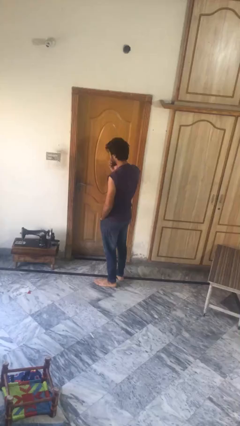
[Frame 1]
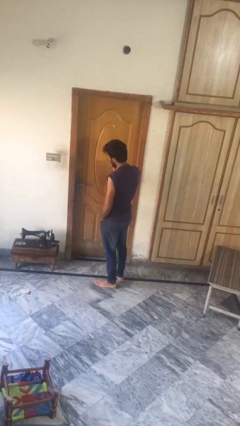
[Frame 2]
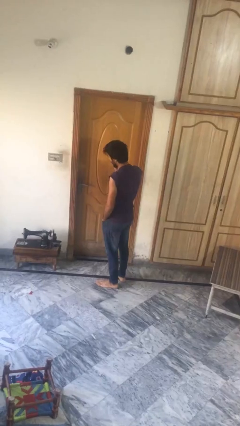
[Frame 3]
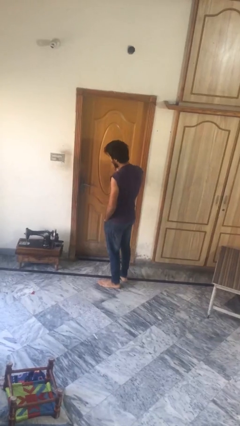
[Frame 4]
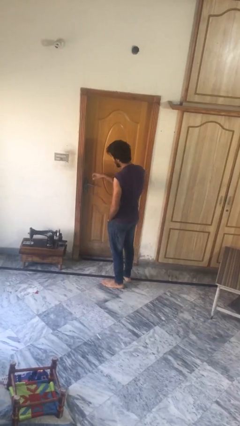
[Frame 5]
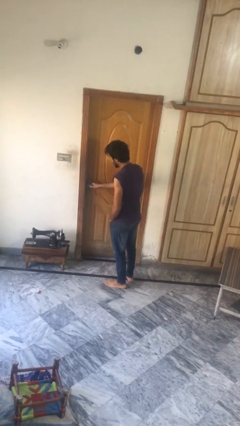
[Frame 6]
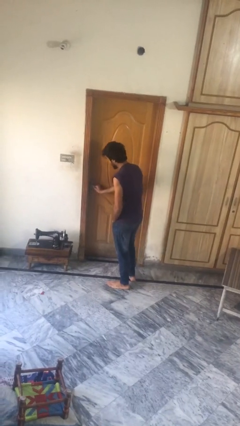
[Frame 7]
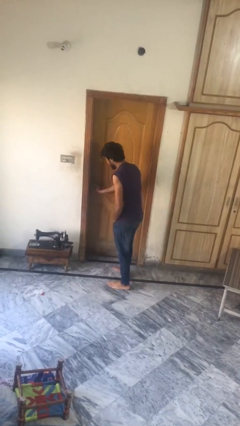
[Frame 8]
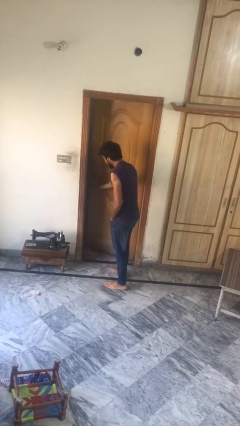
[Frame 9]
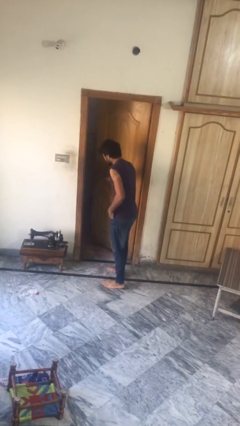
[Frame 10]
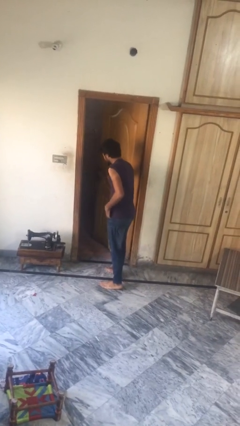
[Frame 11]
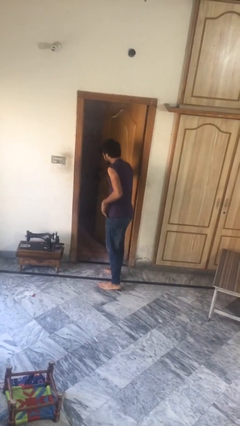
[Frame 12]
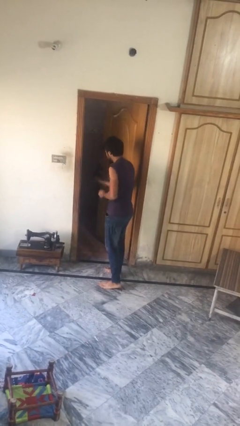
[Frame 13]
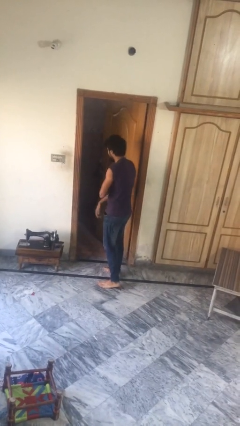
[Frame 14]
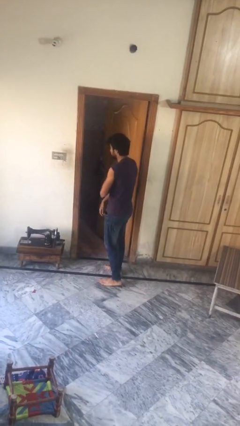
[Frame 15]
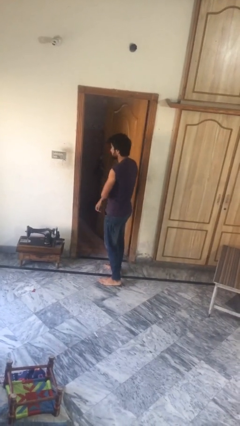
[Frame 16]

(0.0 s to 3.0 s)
person opens facility door

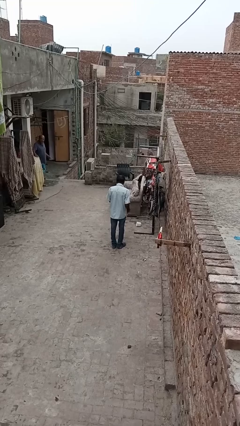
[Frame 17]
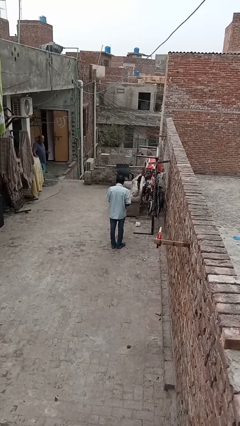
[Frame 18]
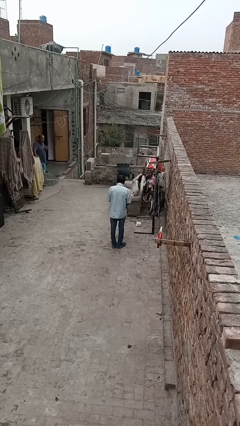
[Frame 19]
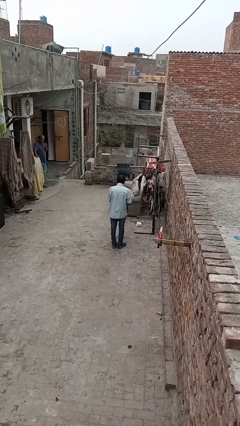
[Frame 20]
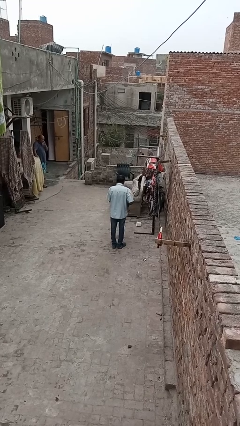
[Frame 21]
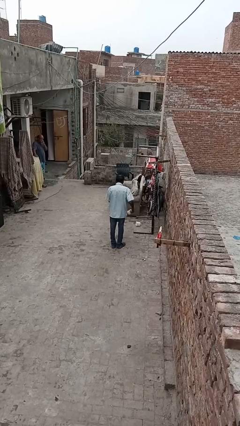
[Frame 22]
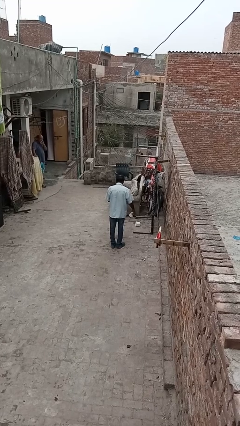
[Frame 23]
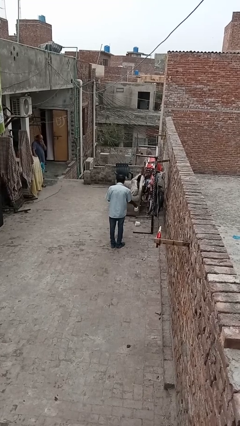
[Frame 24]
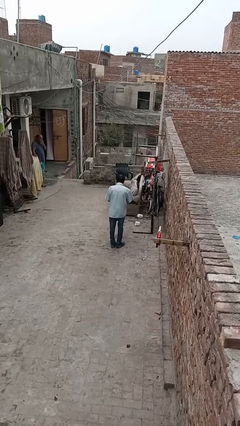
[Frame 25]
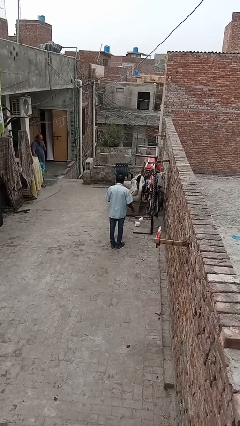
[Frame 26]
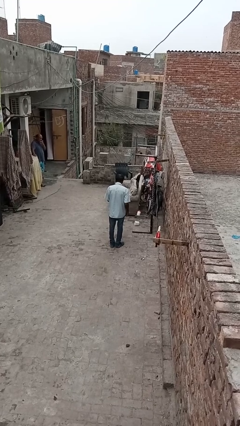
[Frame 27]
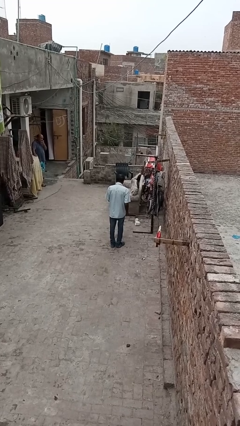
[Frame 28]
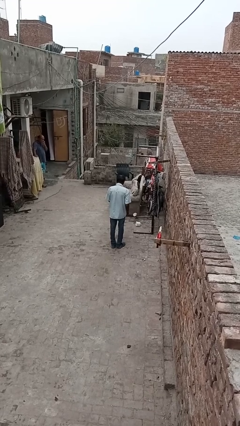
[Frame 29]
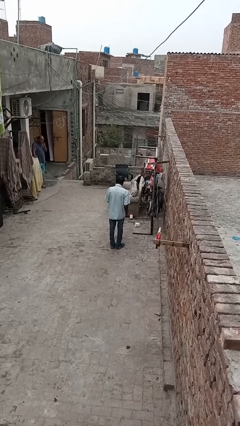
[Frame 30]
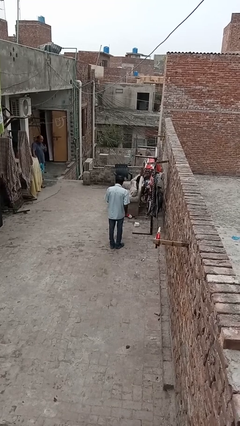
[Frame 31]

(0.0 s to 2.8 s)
person cleans table with rag

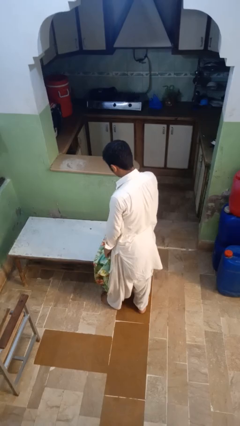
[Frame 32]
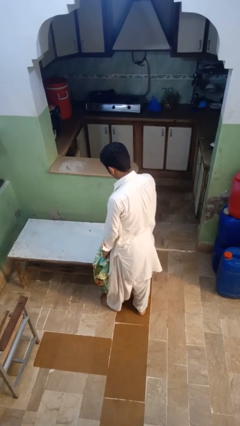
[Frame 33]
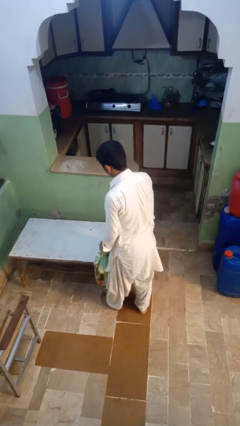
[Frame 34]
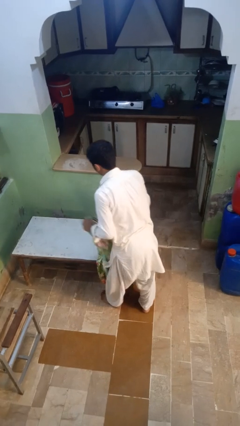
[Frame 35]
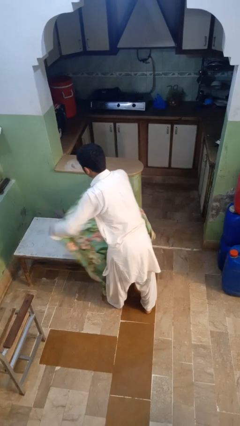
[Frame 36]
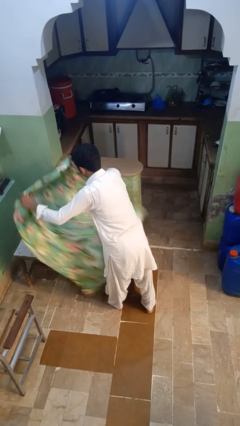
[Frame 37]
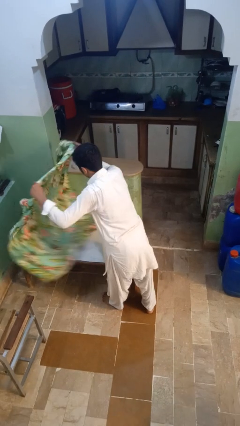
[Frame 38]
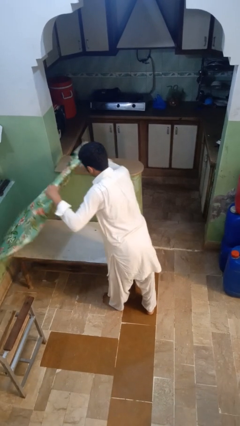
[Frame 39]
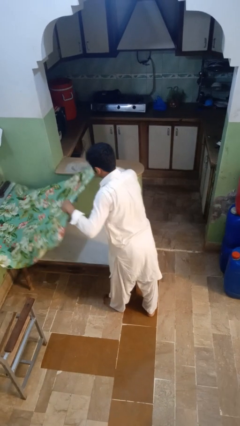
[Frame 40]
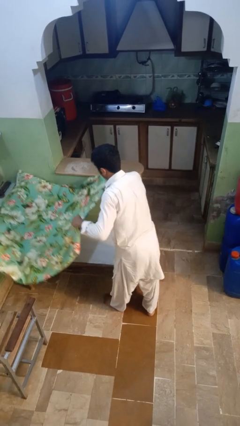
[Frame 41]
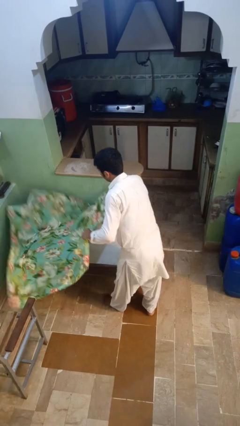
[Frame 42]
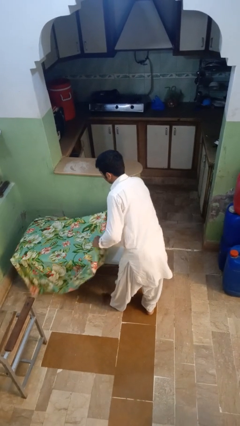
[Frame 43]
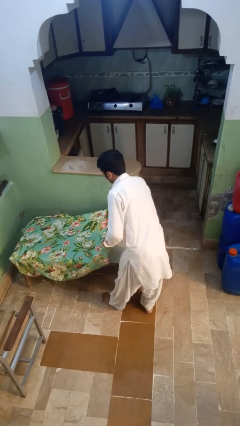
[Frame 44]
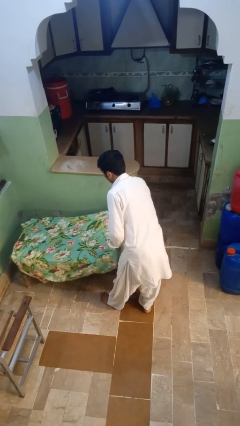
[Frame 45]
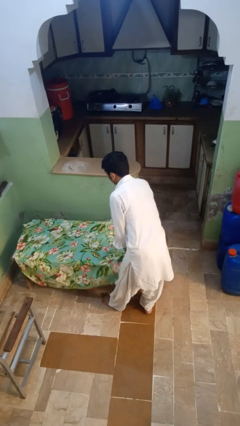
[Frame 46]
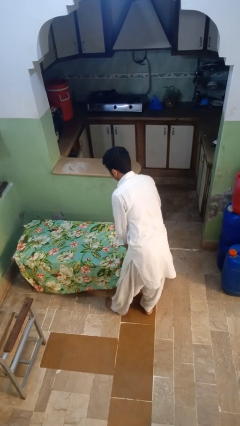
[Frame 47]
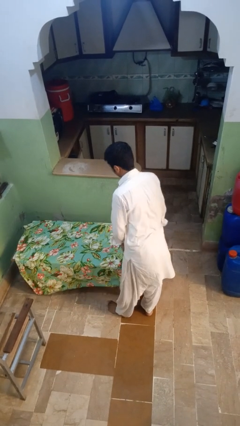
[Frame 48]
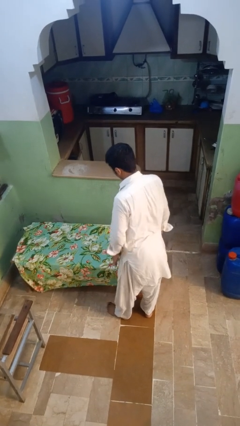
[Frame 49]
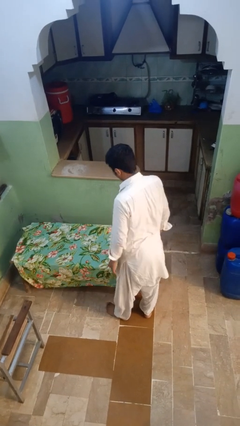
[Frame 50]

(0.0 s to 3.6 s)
person spreads tablecloth

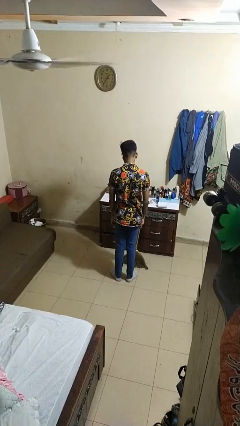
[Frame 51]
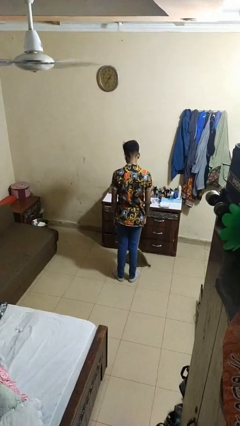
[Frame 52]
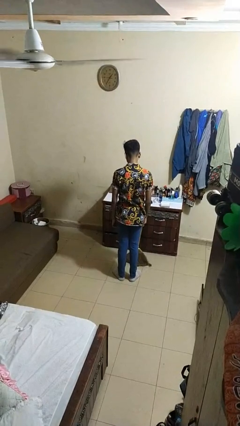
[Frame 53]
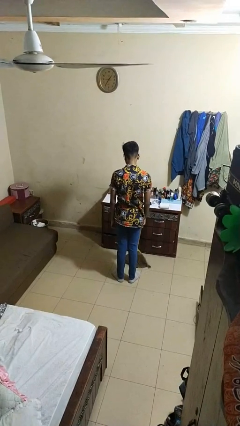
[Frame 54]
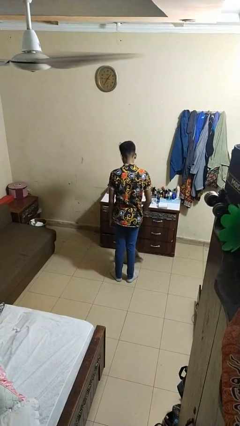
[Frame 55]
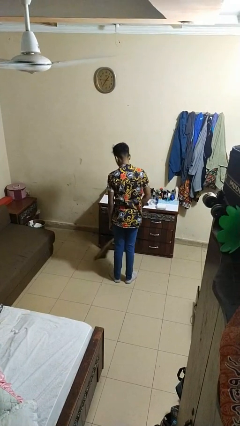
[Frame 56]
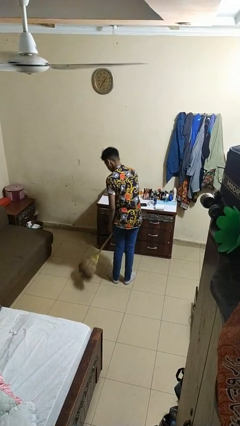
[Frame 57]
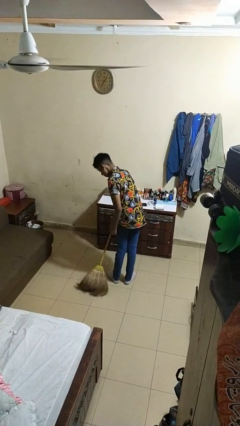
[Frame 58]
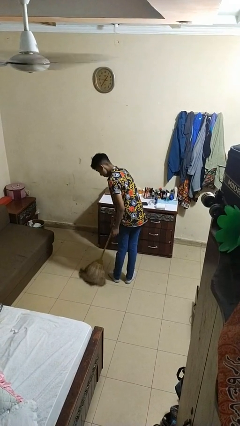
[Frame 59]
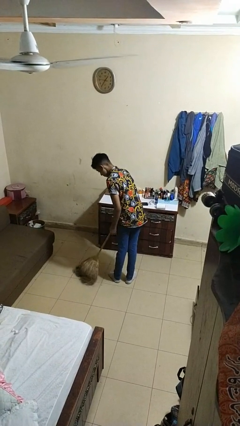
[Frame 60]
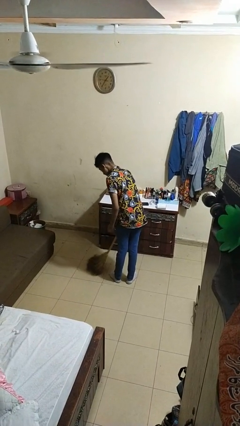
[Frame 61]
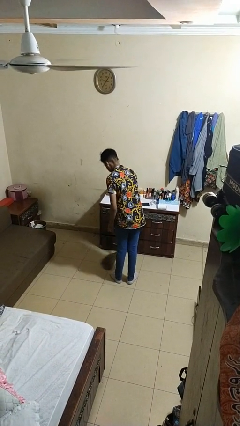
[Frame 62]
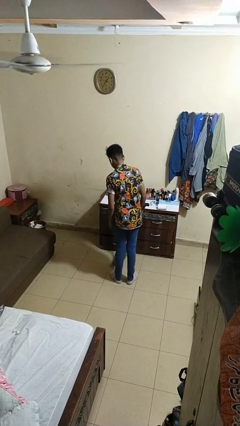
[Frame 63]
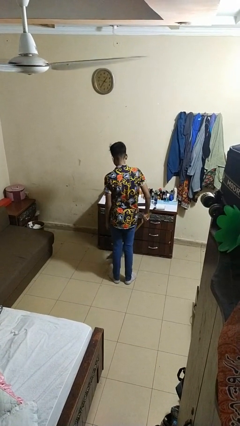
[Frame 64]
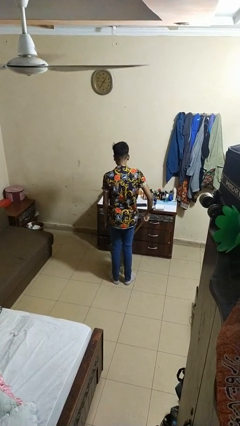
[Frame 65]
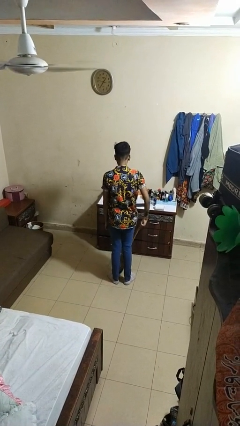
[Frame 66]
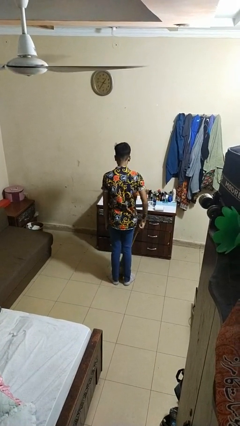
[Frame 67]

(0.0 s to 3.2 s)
person sweeps floor

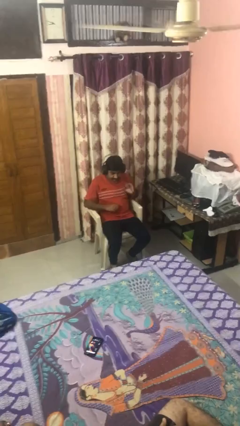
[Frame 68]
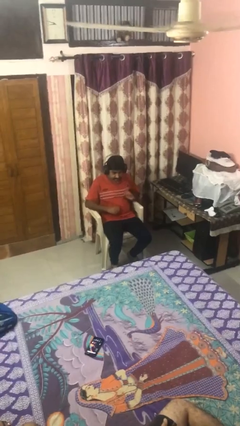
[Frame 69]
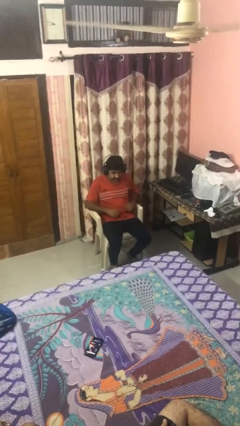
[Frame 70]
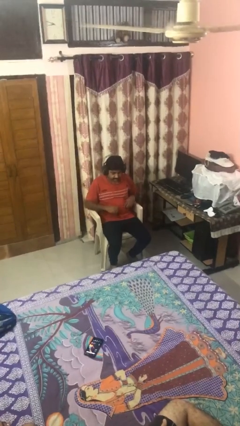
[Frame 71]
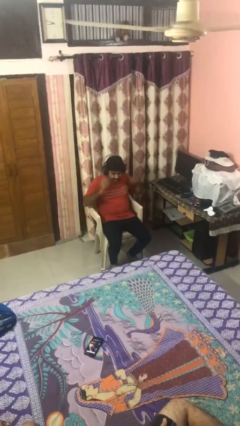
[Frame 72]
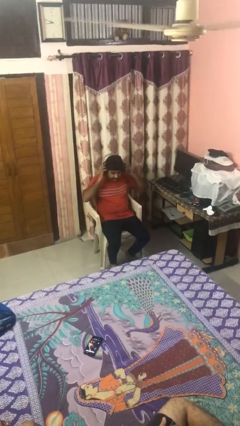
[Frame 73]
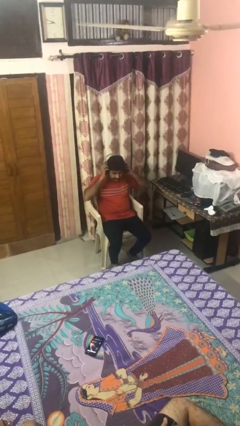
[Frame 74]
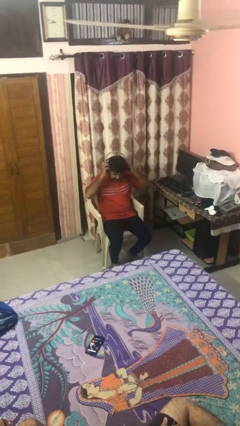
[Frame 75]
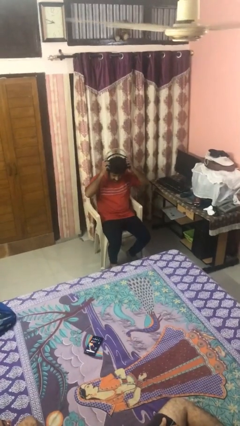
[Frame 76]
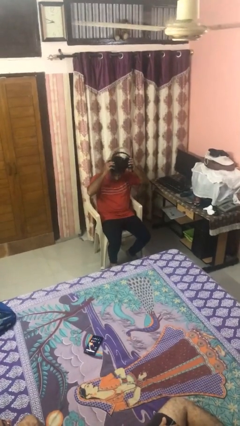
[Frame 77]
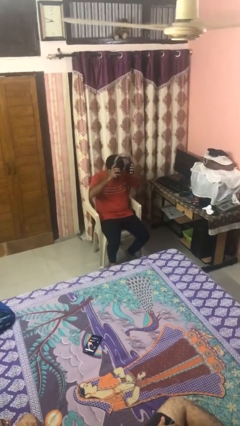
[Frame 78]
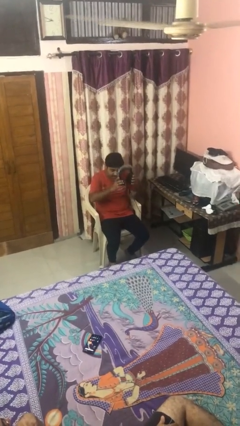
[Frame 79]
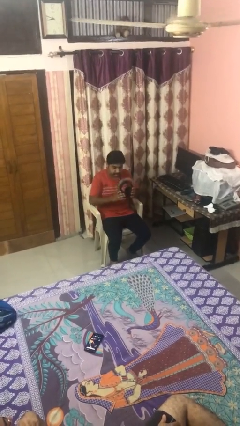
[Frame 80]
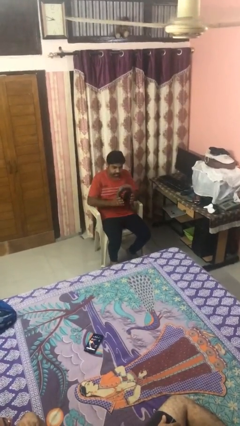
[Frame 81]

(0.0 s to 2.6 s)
person takes off headphones

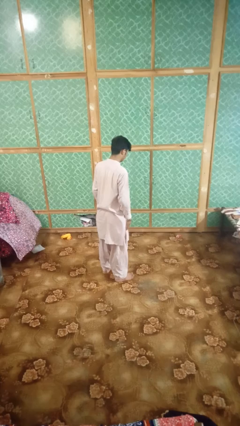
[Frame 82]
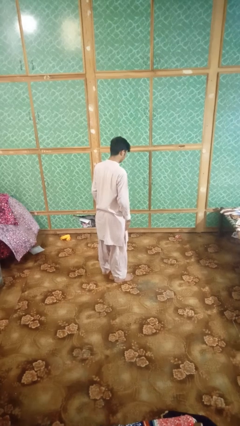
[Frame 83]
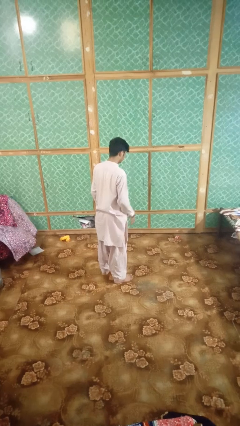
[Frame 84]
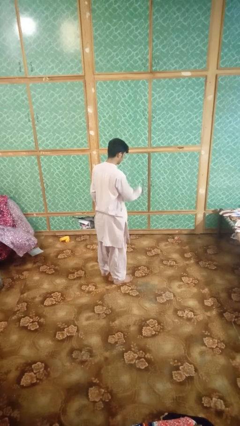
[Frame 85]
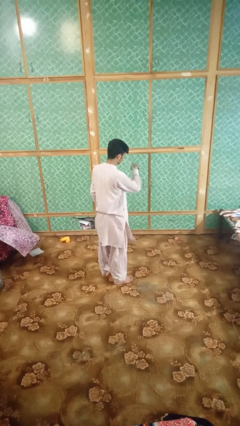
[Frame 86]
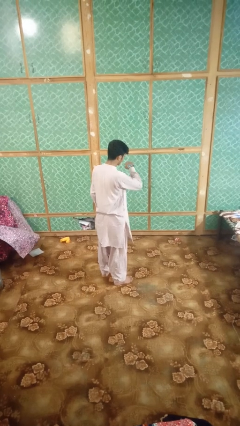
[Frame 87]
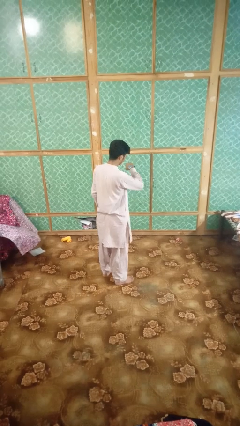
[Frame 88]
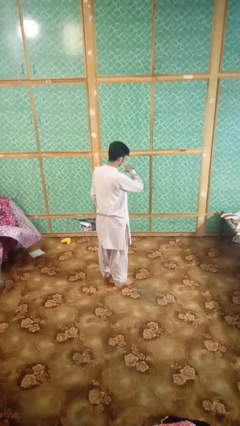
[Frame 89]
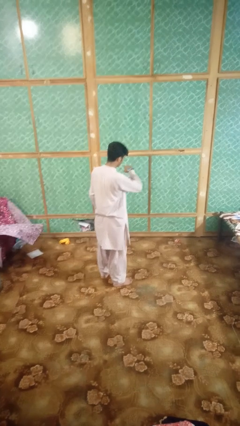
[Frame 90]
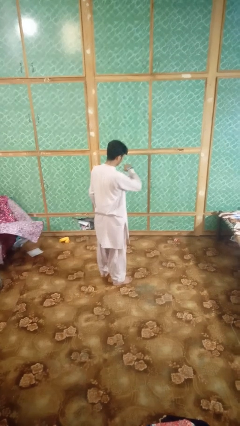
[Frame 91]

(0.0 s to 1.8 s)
person looks at wristwatch

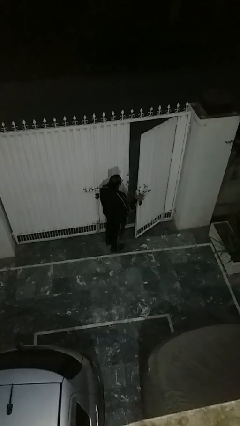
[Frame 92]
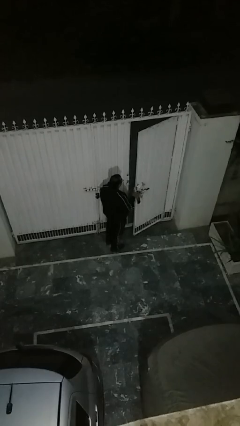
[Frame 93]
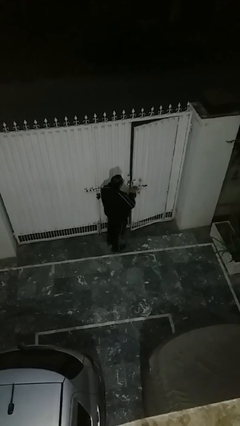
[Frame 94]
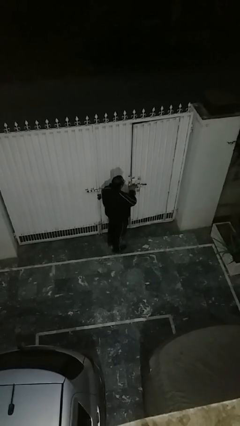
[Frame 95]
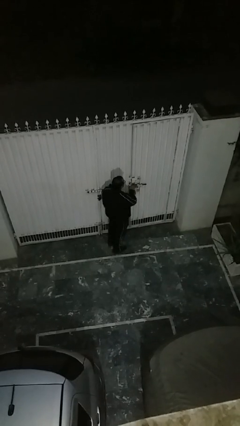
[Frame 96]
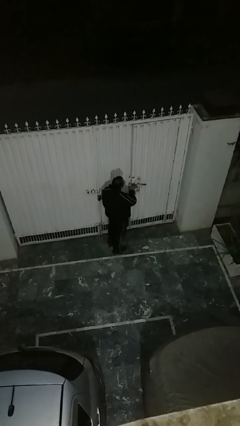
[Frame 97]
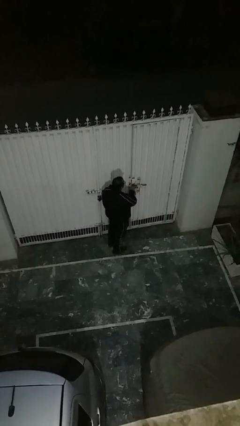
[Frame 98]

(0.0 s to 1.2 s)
person closes facility door
